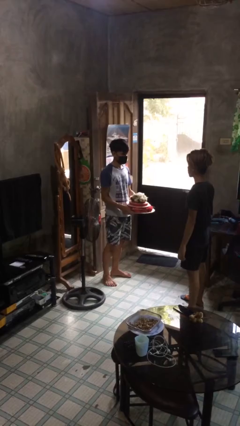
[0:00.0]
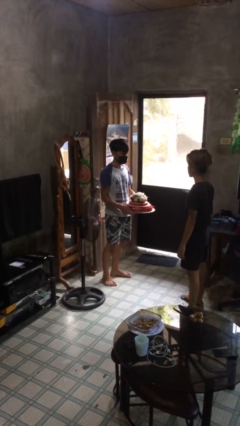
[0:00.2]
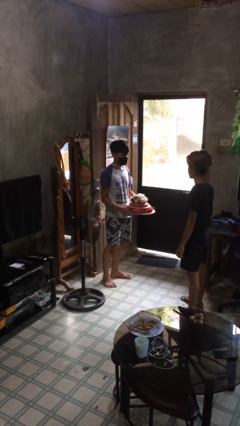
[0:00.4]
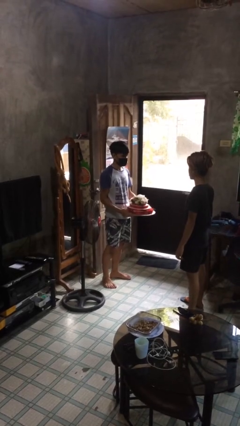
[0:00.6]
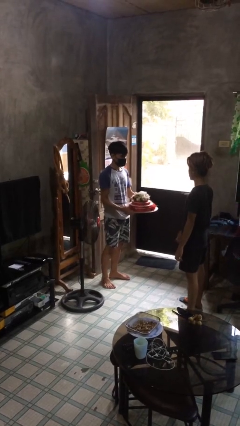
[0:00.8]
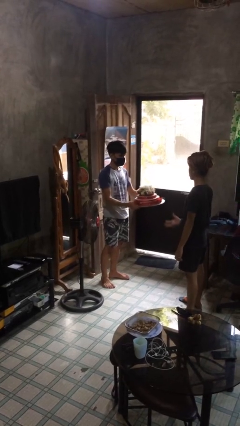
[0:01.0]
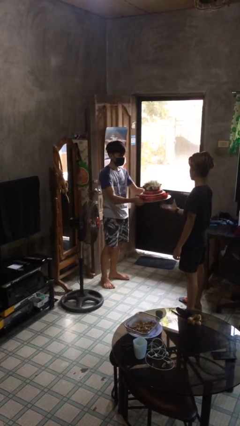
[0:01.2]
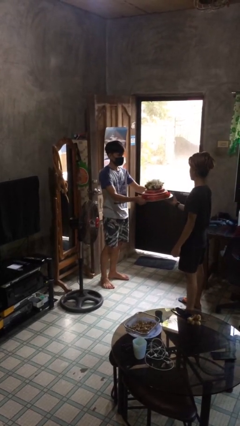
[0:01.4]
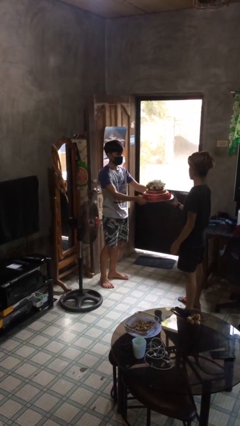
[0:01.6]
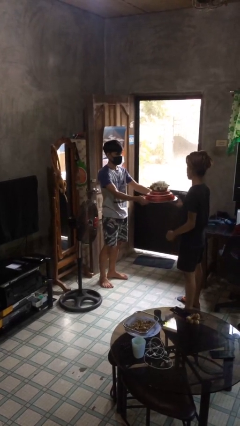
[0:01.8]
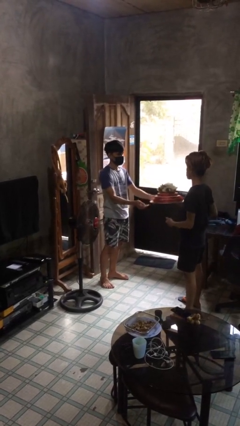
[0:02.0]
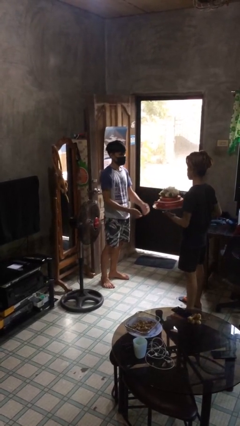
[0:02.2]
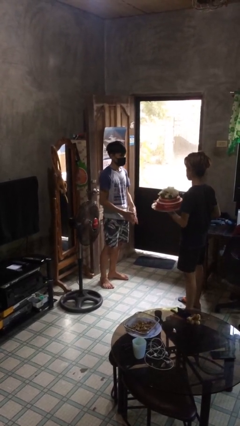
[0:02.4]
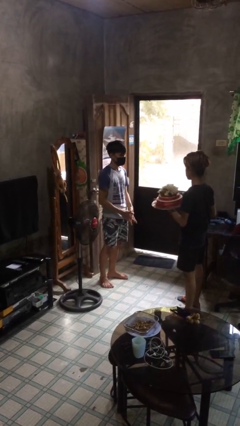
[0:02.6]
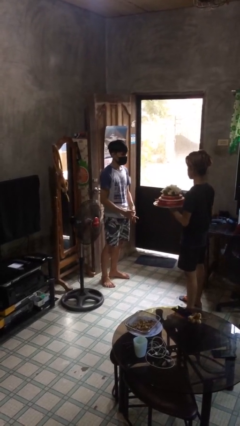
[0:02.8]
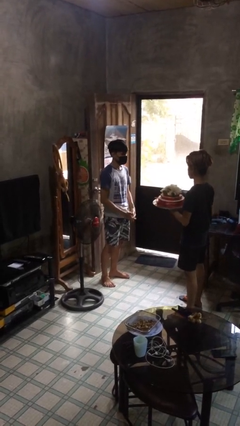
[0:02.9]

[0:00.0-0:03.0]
person transfers object to person

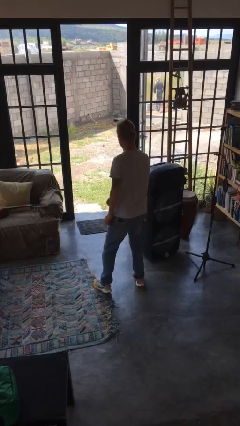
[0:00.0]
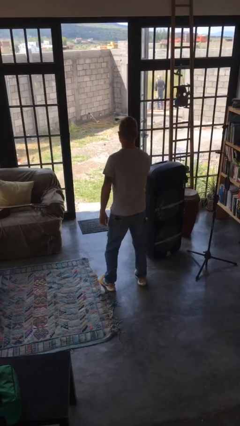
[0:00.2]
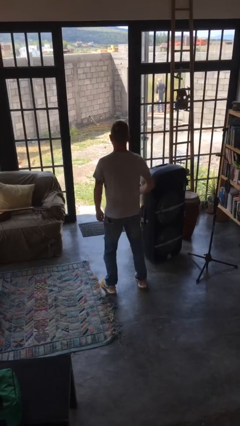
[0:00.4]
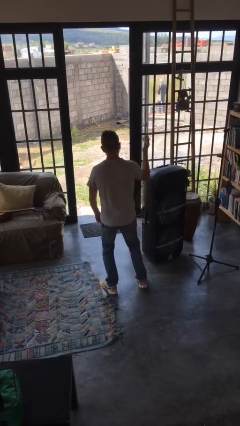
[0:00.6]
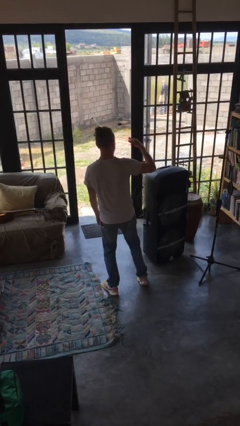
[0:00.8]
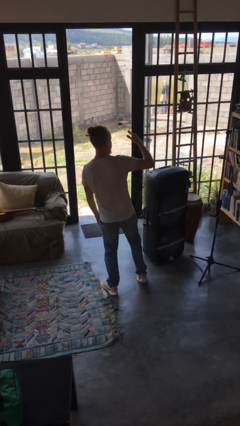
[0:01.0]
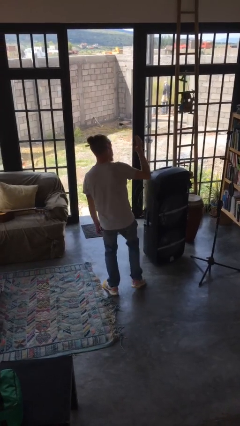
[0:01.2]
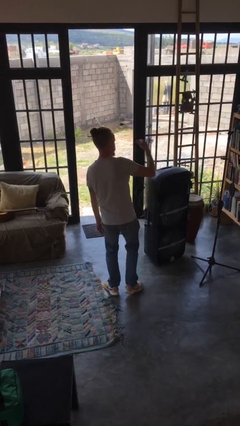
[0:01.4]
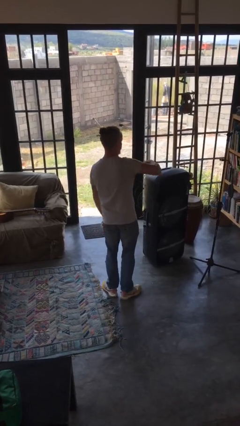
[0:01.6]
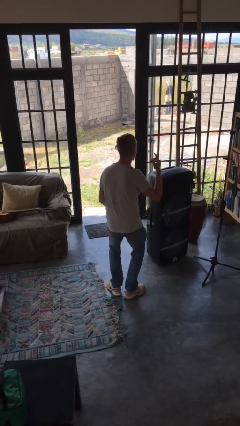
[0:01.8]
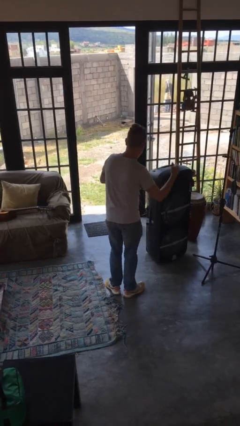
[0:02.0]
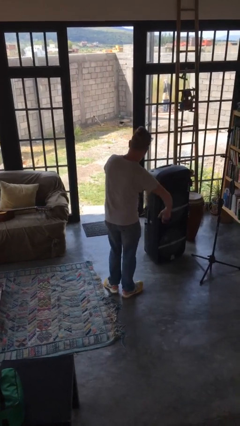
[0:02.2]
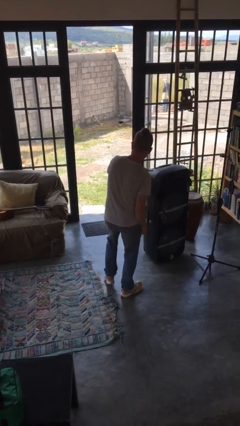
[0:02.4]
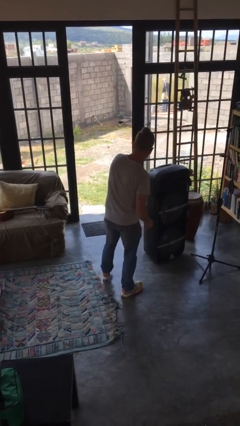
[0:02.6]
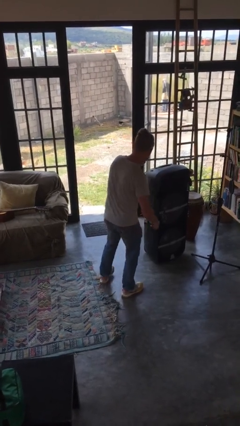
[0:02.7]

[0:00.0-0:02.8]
person dances in place

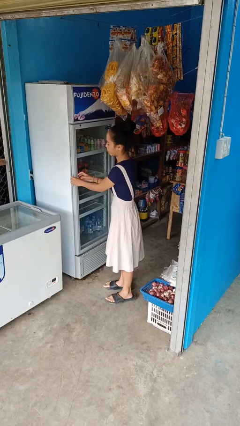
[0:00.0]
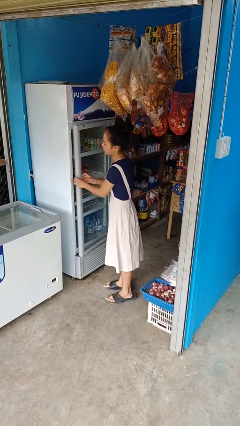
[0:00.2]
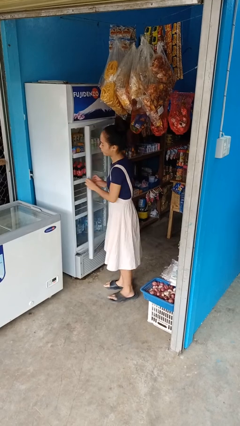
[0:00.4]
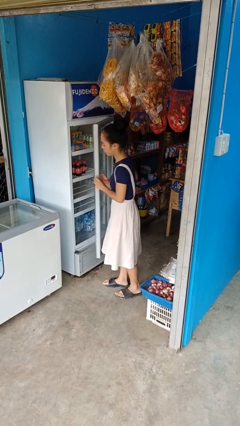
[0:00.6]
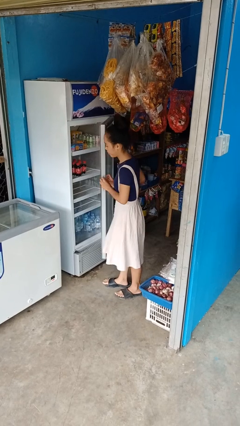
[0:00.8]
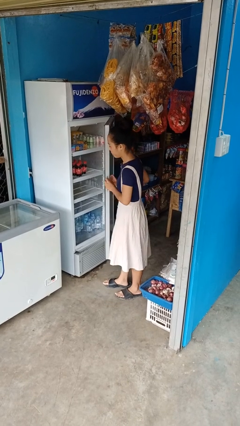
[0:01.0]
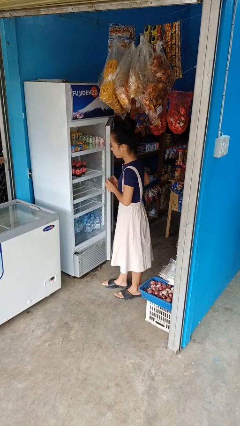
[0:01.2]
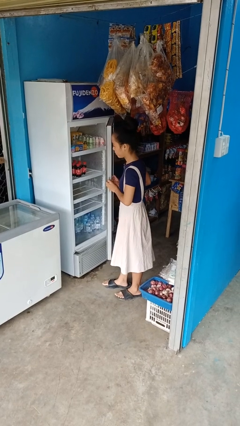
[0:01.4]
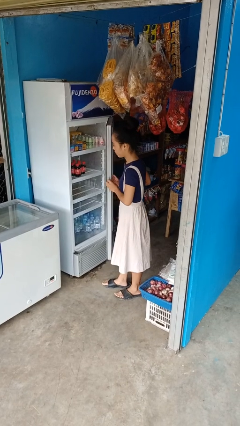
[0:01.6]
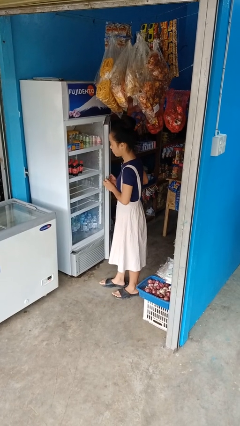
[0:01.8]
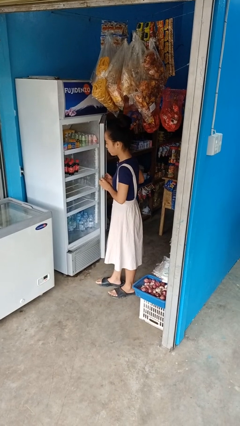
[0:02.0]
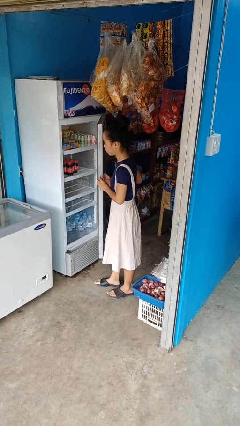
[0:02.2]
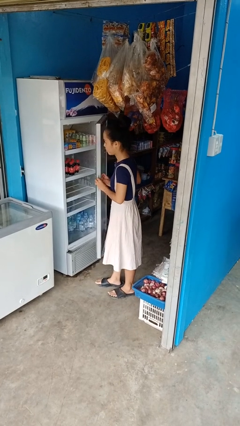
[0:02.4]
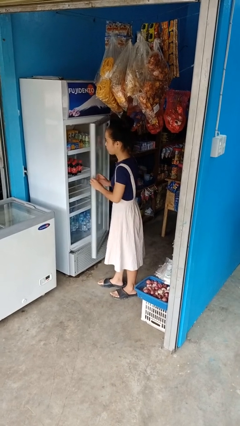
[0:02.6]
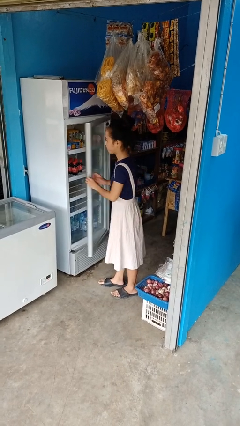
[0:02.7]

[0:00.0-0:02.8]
person opens refrigerator

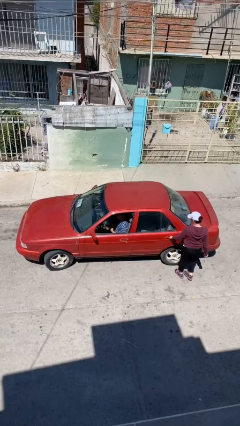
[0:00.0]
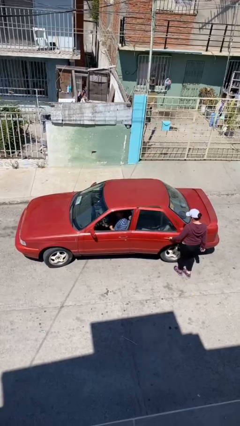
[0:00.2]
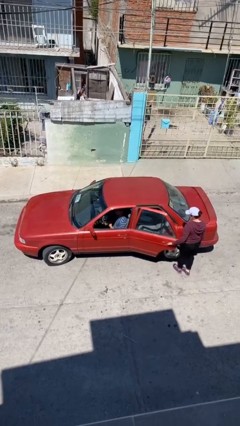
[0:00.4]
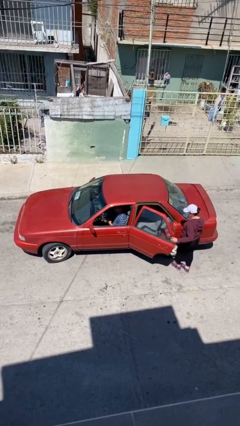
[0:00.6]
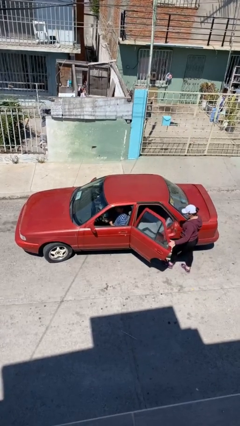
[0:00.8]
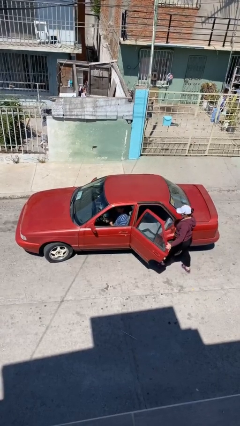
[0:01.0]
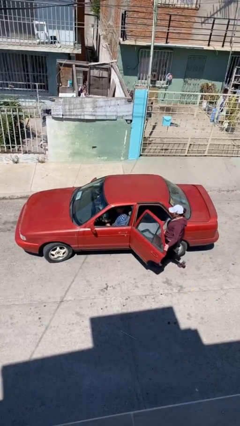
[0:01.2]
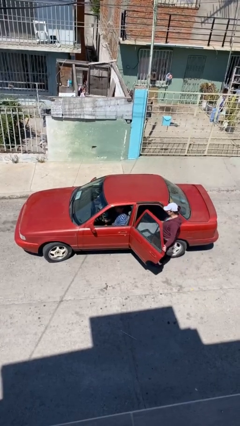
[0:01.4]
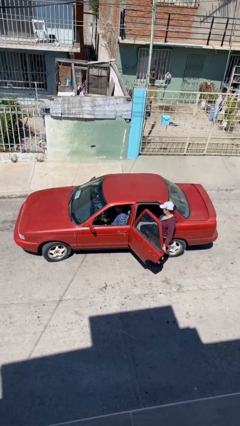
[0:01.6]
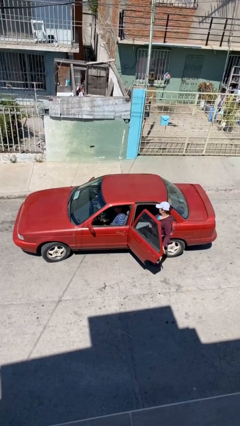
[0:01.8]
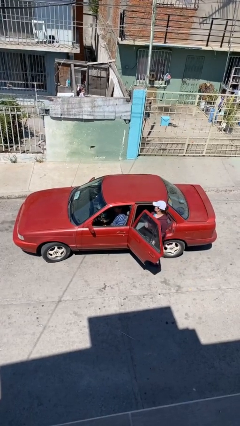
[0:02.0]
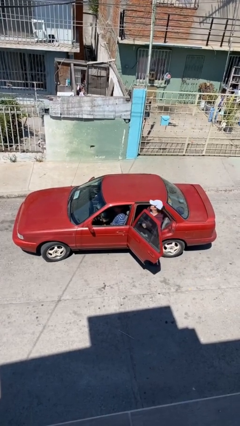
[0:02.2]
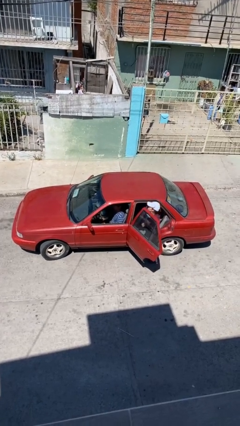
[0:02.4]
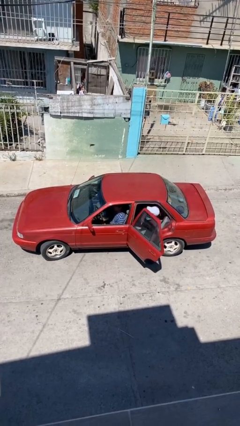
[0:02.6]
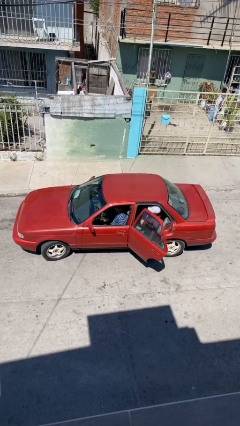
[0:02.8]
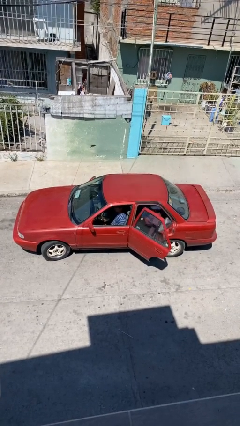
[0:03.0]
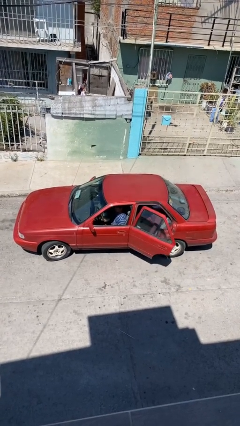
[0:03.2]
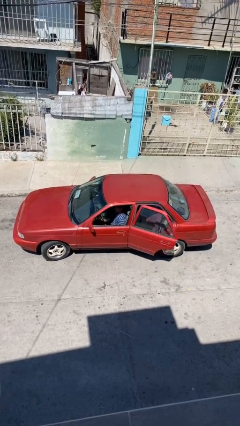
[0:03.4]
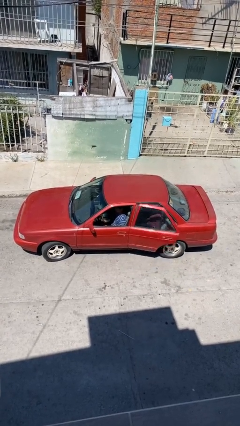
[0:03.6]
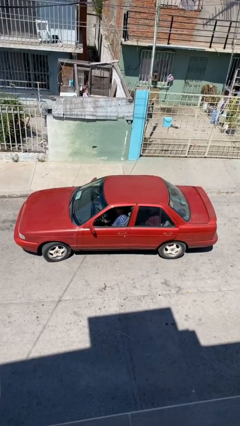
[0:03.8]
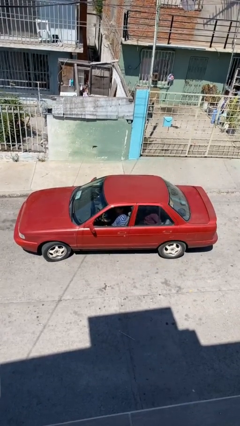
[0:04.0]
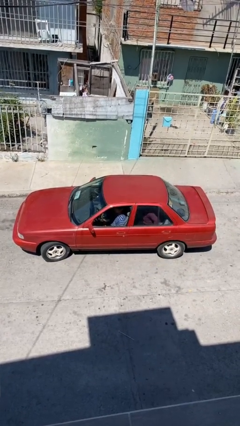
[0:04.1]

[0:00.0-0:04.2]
car picks up person

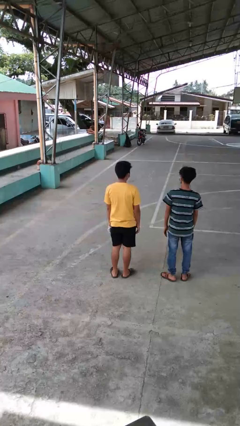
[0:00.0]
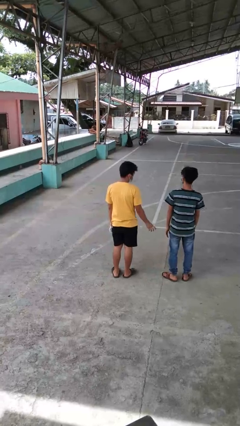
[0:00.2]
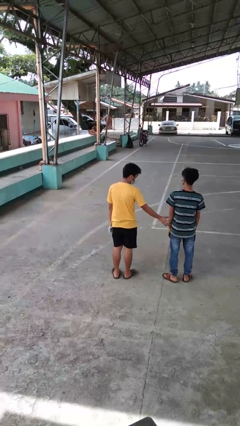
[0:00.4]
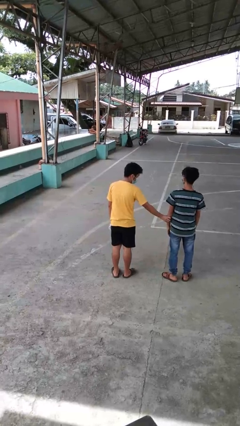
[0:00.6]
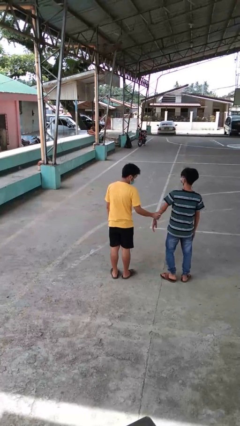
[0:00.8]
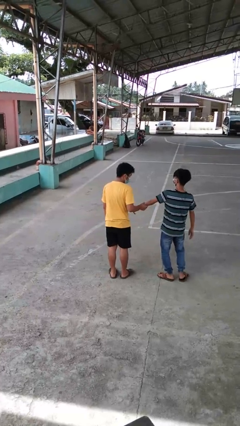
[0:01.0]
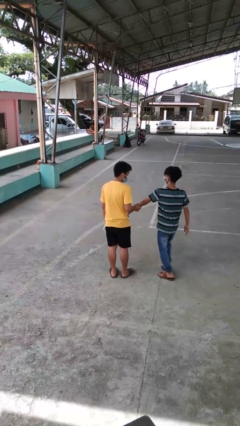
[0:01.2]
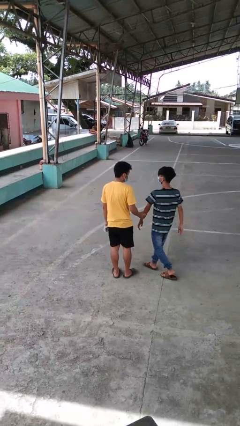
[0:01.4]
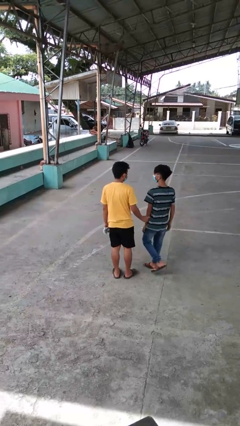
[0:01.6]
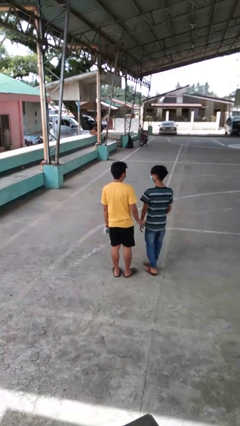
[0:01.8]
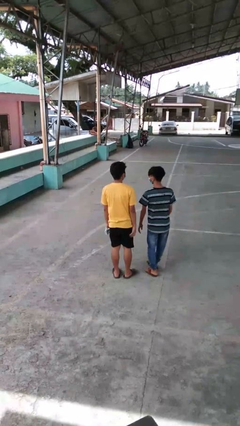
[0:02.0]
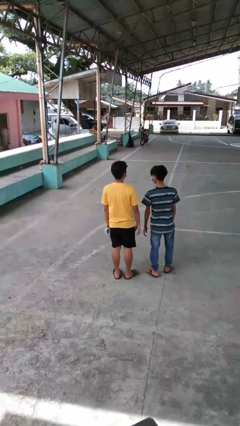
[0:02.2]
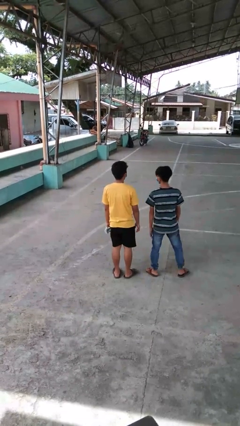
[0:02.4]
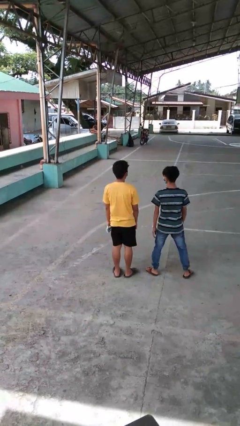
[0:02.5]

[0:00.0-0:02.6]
person grabs person by forearm

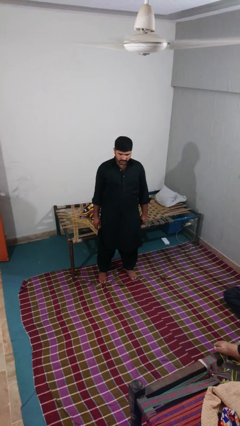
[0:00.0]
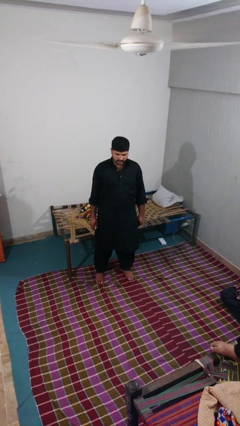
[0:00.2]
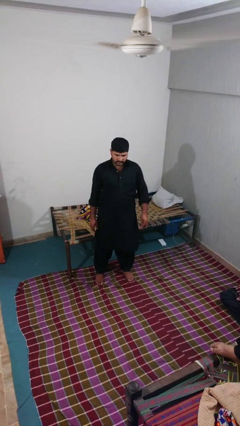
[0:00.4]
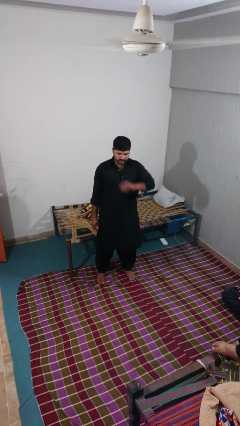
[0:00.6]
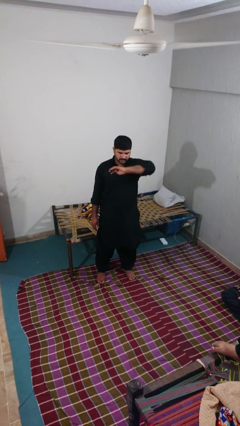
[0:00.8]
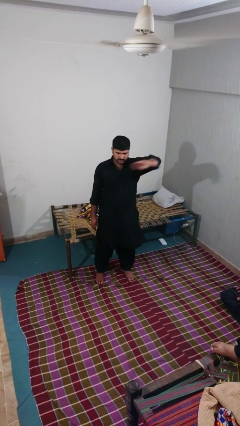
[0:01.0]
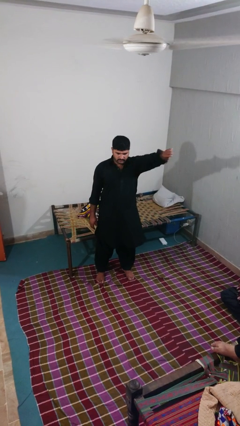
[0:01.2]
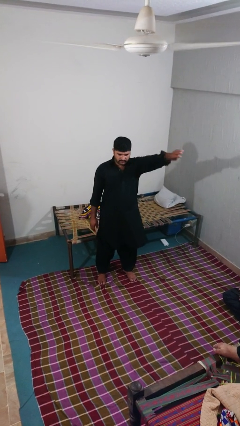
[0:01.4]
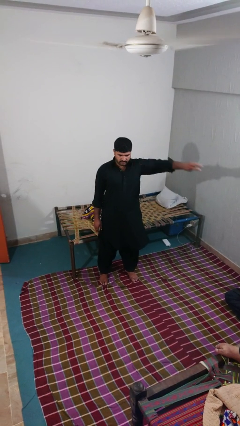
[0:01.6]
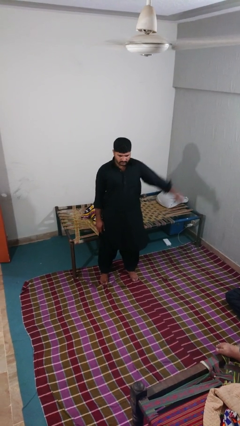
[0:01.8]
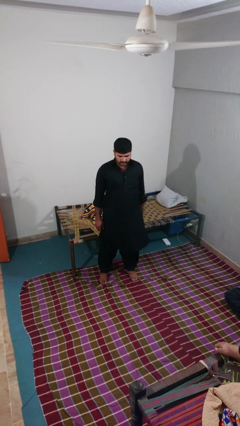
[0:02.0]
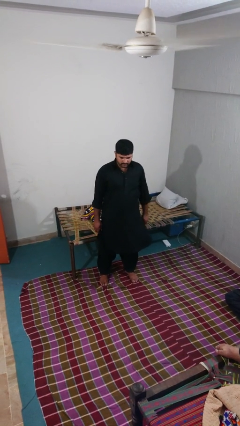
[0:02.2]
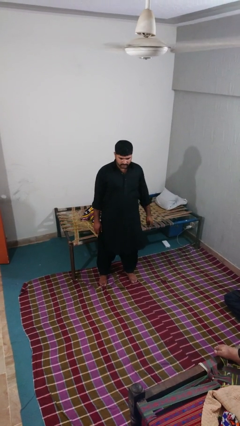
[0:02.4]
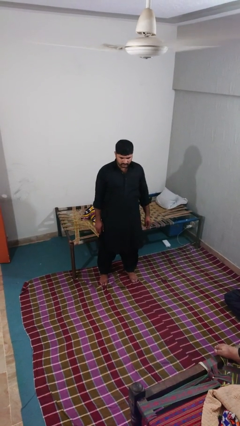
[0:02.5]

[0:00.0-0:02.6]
person gestures swipe left
